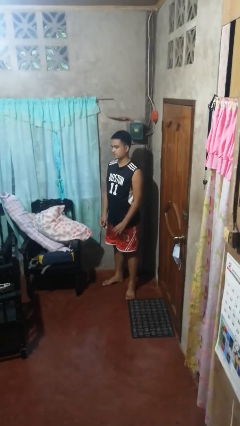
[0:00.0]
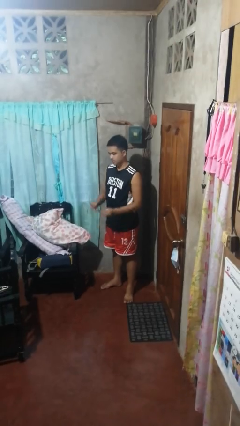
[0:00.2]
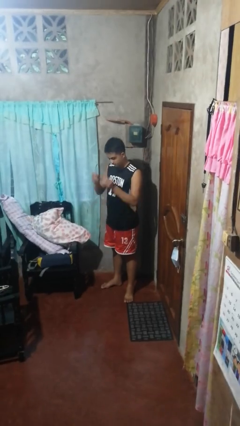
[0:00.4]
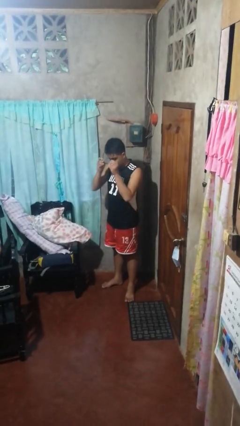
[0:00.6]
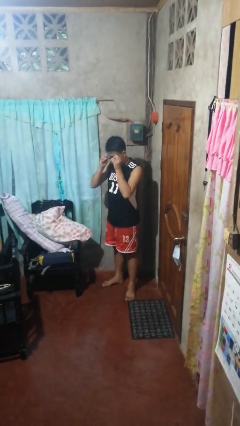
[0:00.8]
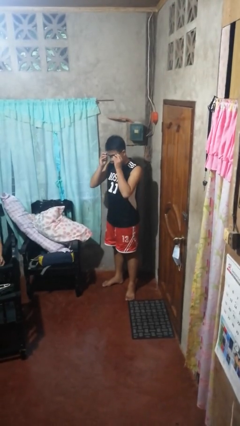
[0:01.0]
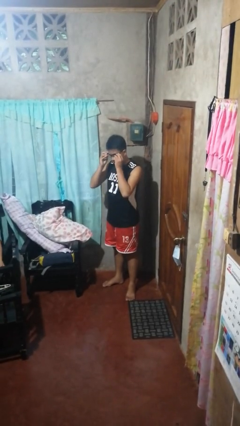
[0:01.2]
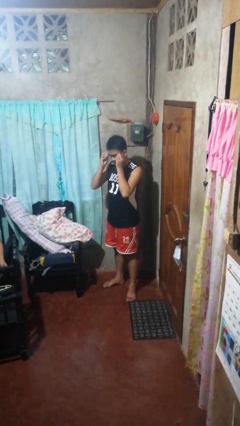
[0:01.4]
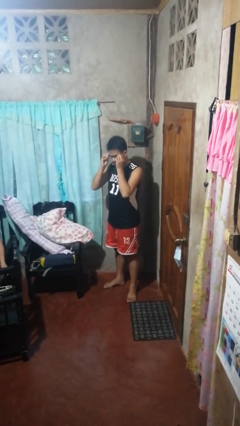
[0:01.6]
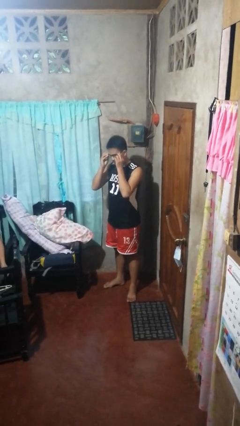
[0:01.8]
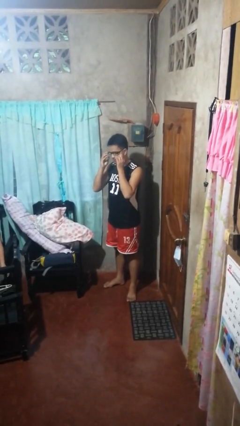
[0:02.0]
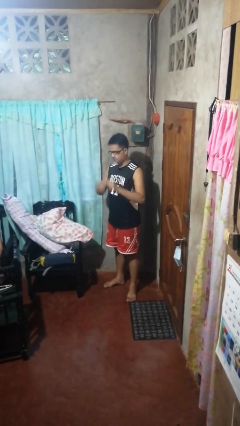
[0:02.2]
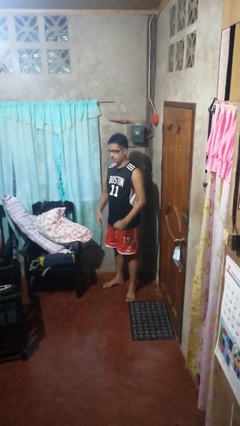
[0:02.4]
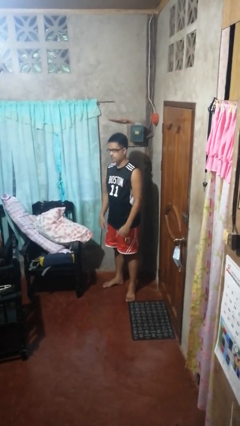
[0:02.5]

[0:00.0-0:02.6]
person puts on glasses

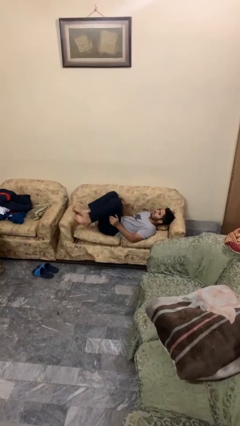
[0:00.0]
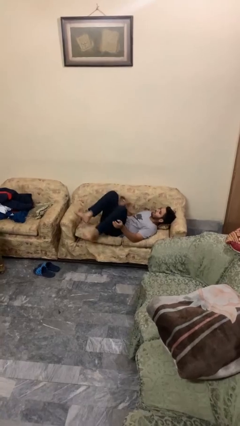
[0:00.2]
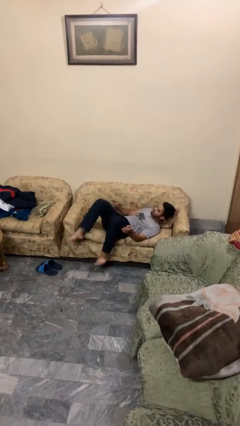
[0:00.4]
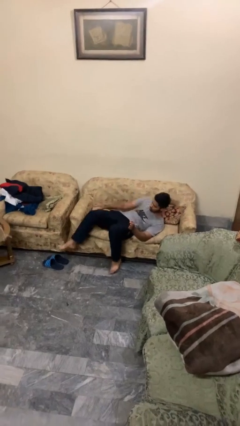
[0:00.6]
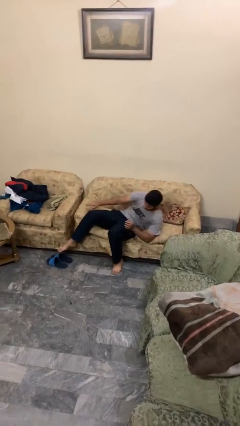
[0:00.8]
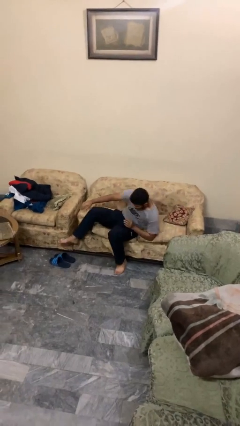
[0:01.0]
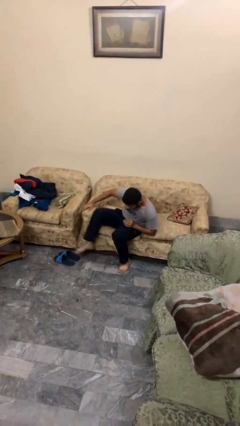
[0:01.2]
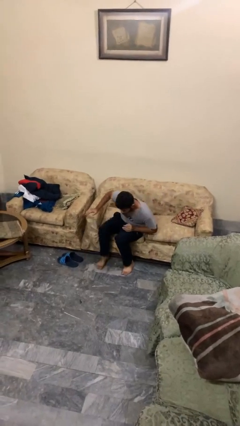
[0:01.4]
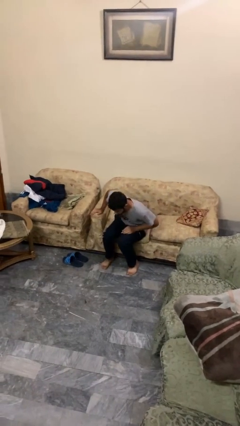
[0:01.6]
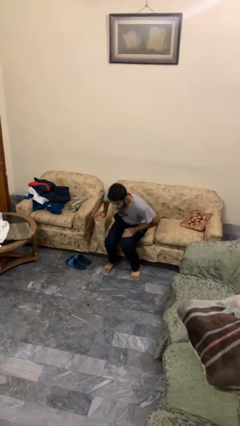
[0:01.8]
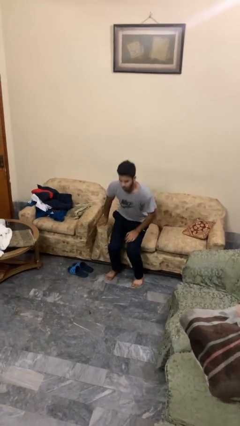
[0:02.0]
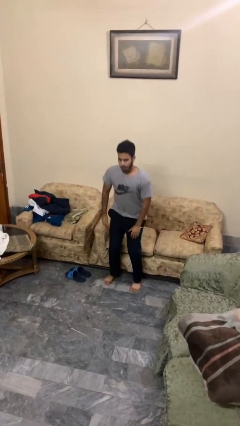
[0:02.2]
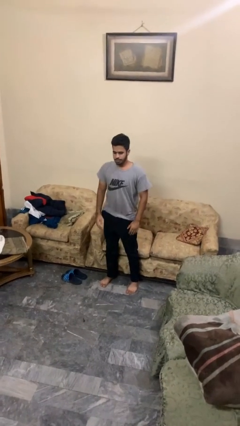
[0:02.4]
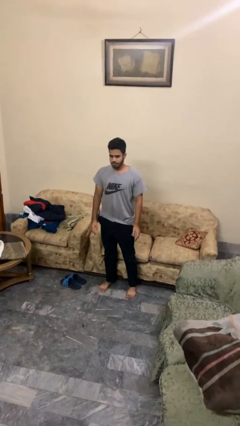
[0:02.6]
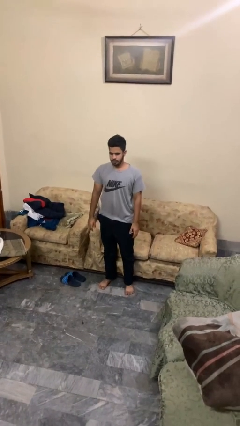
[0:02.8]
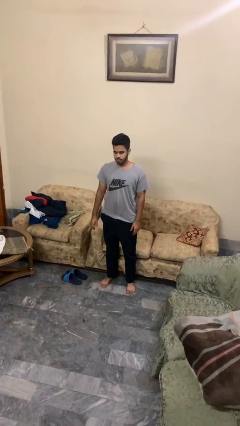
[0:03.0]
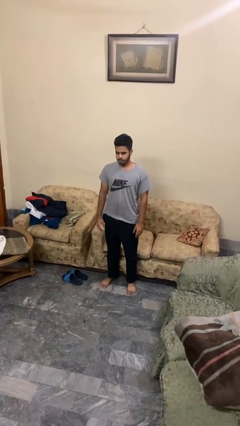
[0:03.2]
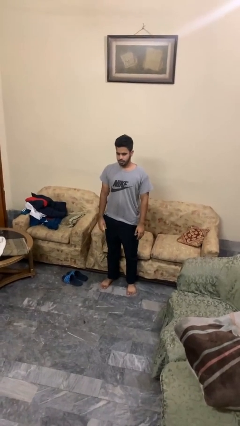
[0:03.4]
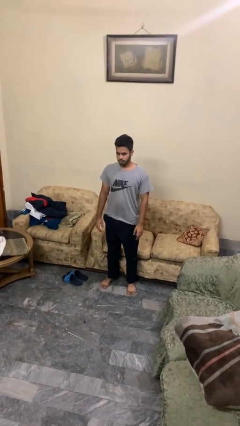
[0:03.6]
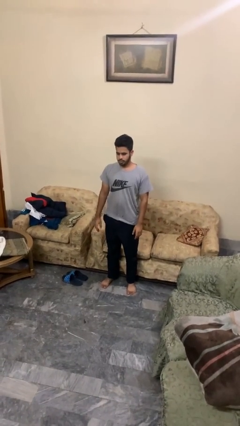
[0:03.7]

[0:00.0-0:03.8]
person stands up

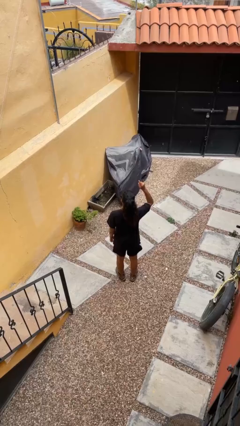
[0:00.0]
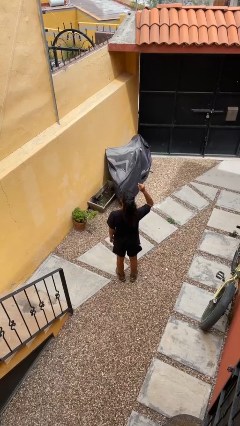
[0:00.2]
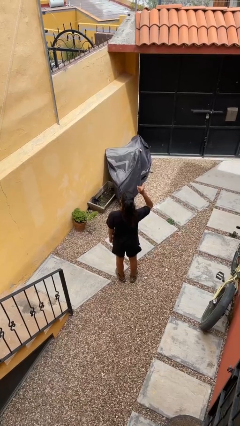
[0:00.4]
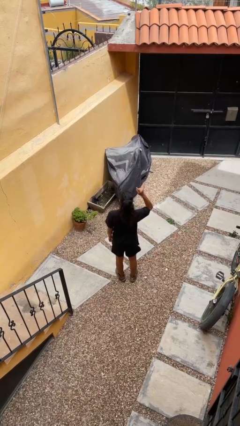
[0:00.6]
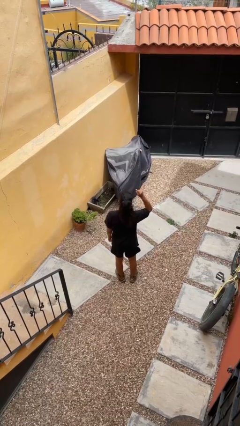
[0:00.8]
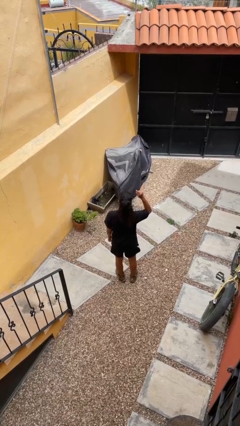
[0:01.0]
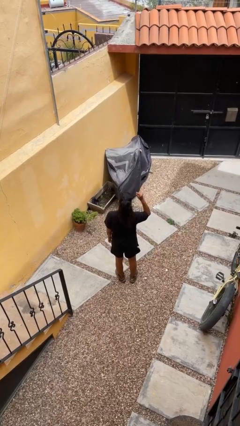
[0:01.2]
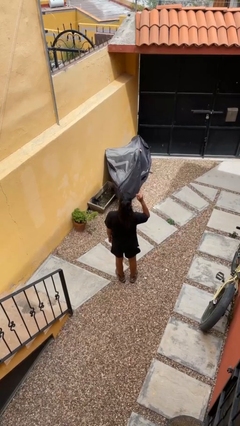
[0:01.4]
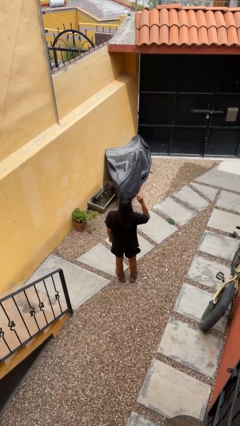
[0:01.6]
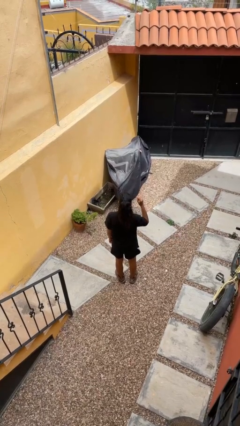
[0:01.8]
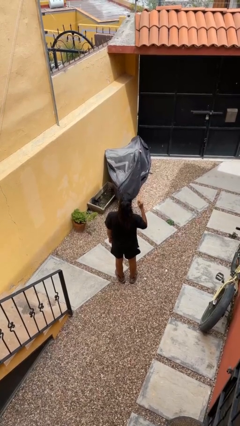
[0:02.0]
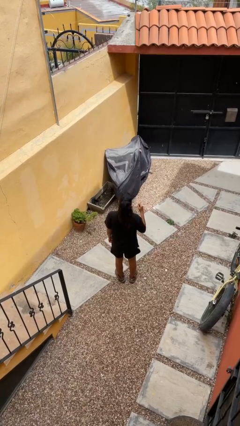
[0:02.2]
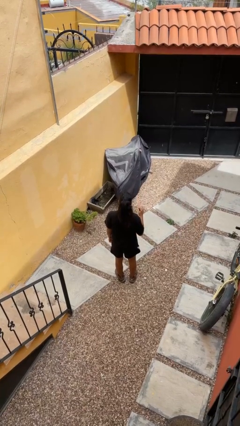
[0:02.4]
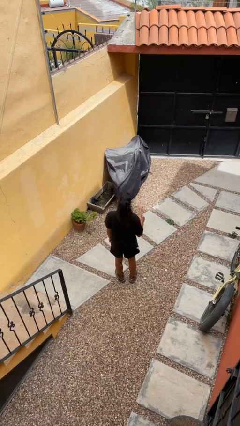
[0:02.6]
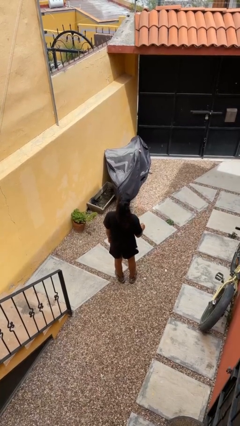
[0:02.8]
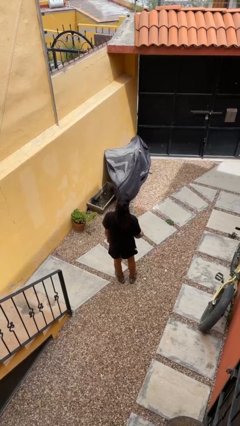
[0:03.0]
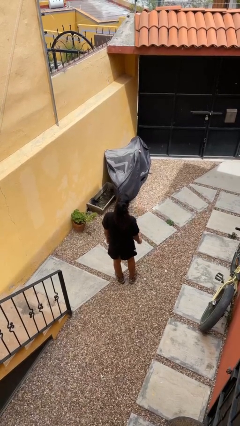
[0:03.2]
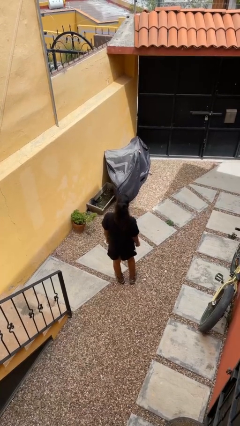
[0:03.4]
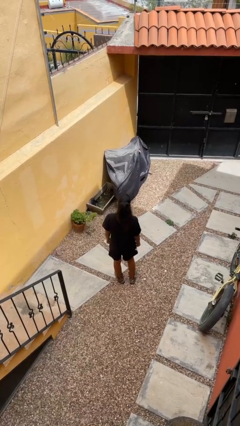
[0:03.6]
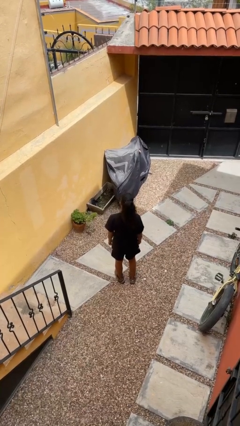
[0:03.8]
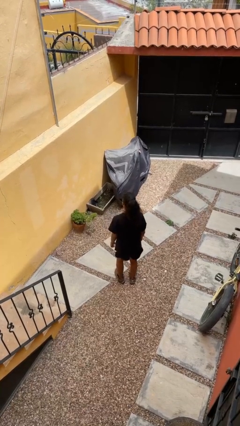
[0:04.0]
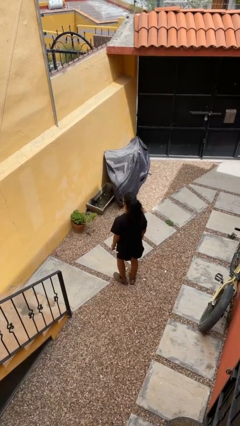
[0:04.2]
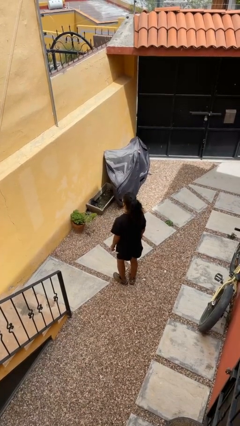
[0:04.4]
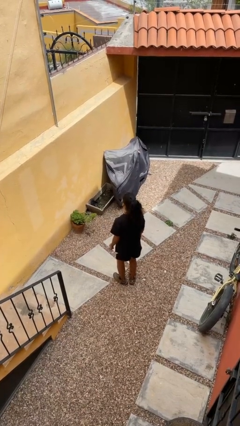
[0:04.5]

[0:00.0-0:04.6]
person gestures lower hand

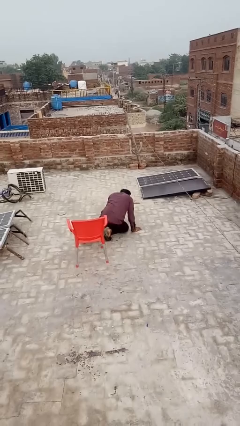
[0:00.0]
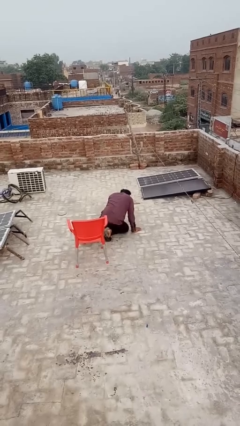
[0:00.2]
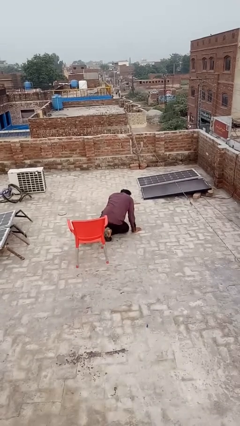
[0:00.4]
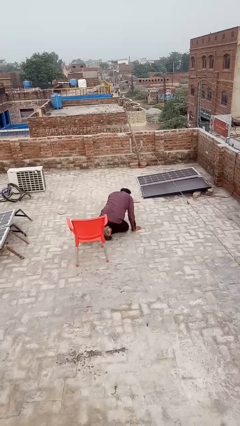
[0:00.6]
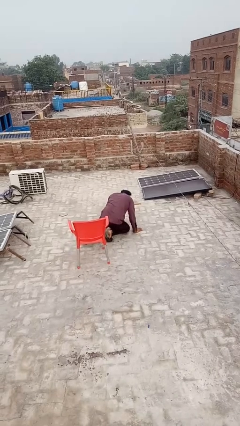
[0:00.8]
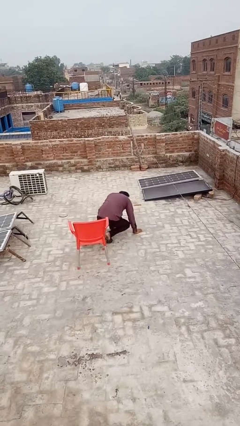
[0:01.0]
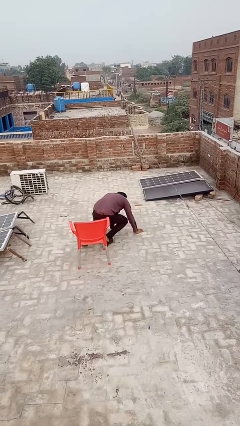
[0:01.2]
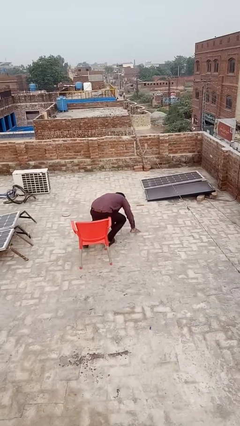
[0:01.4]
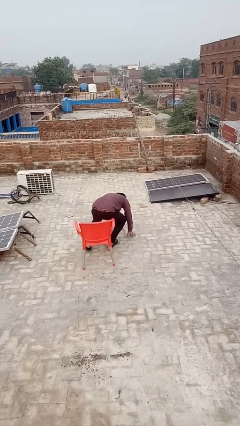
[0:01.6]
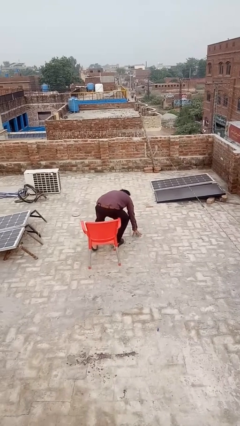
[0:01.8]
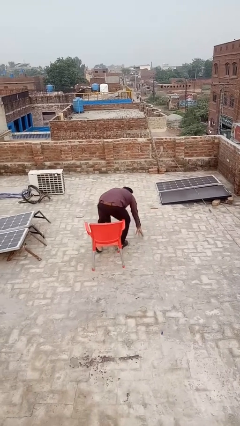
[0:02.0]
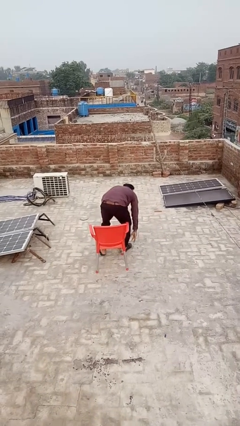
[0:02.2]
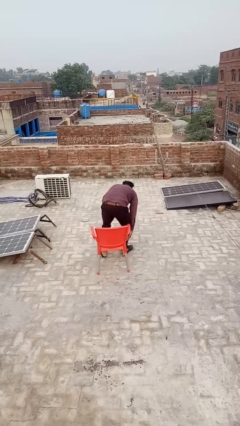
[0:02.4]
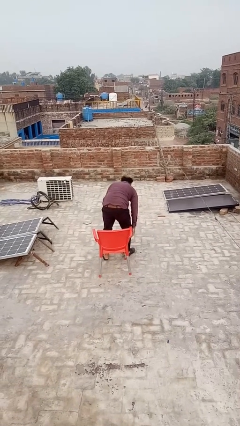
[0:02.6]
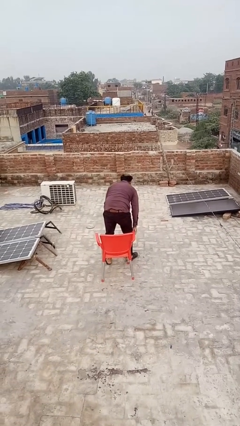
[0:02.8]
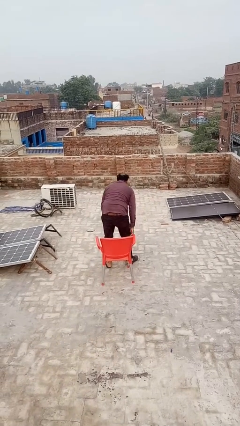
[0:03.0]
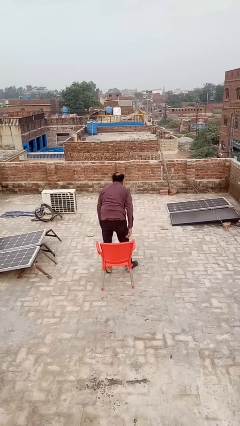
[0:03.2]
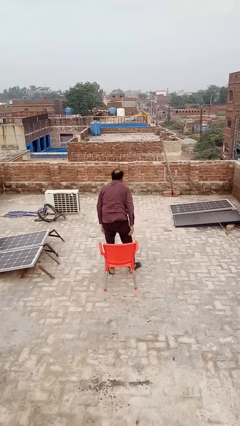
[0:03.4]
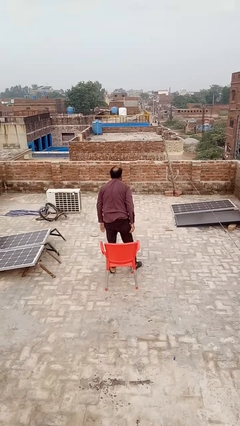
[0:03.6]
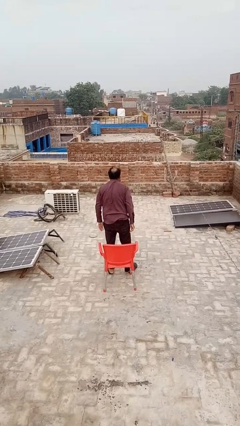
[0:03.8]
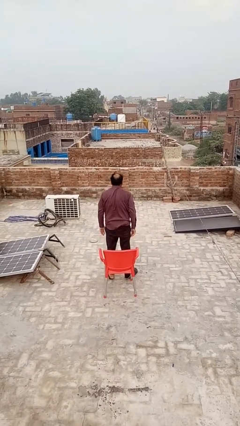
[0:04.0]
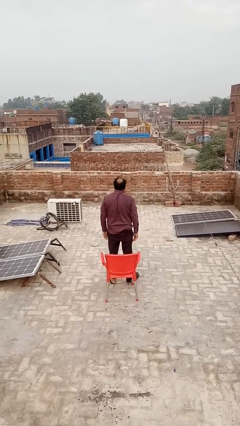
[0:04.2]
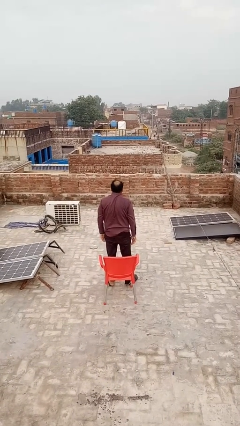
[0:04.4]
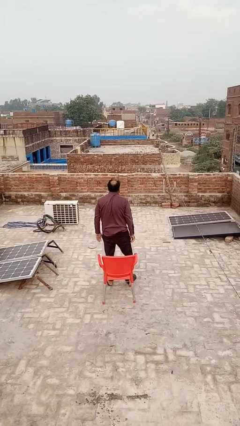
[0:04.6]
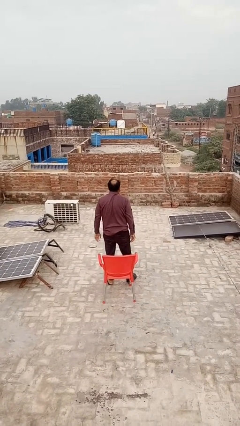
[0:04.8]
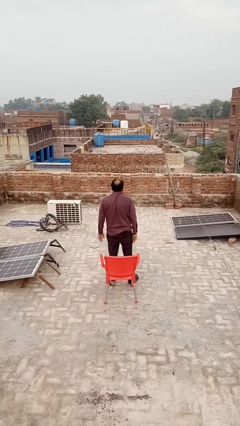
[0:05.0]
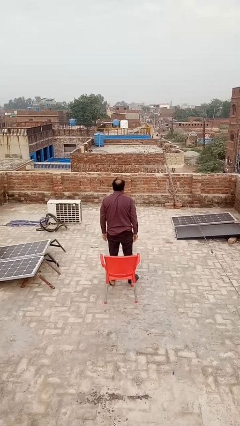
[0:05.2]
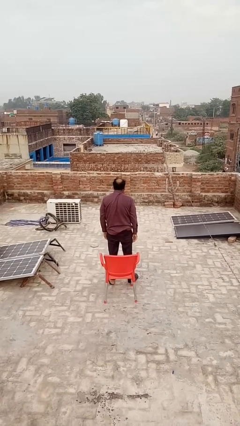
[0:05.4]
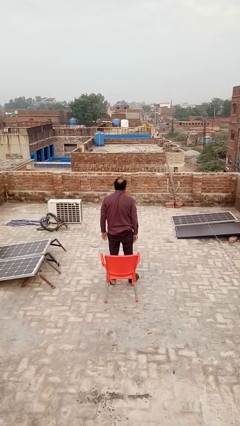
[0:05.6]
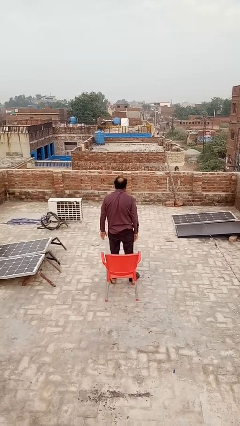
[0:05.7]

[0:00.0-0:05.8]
person stands up from floor

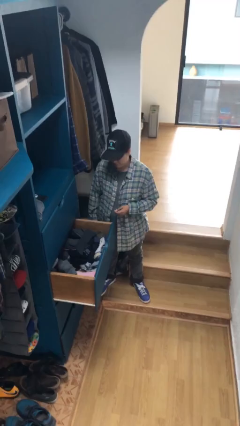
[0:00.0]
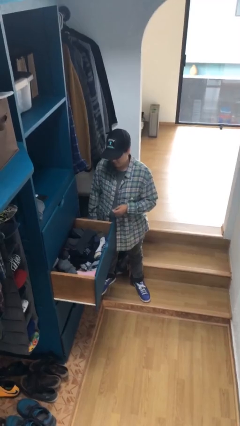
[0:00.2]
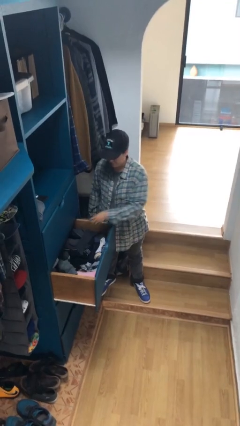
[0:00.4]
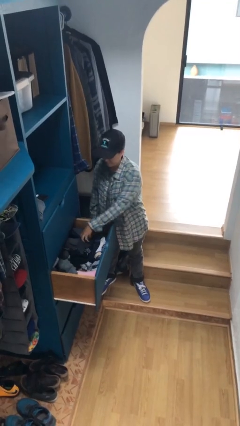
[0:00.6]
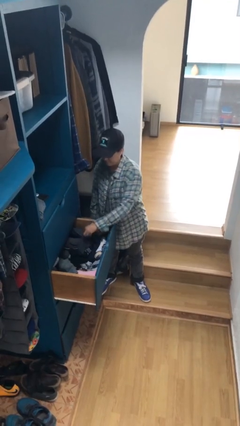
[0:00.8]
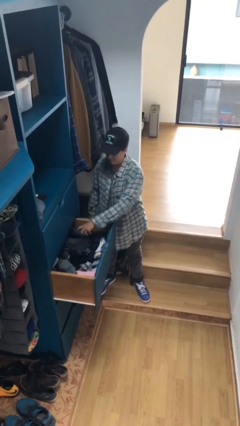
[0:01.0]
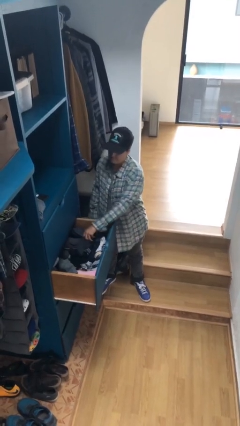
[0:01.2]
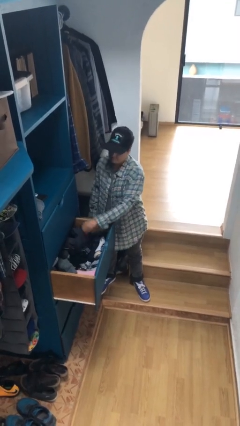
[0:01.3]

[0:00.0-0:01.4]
person takes clothes from dresser
